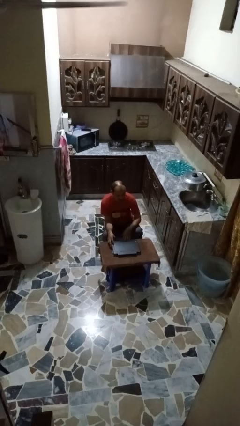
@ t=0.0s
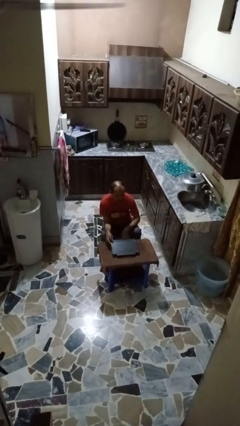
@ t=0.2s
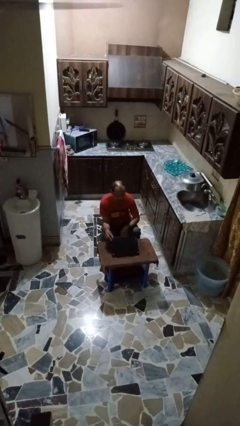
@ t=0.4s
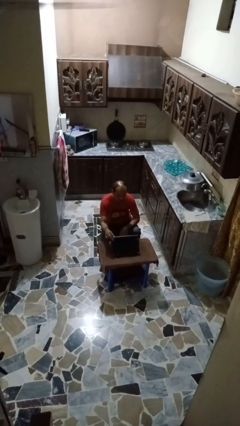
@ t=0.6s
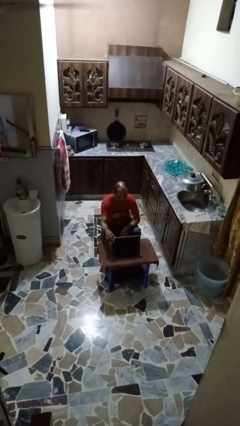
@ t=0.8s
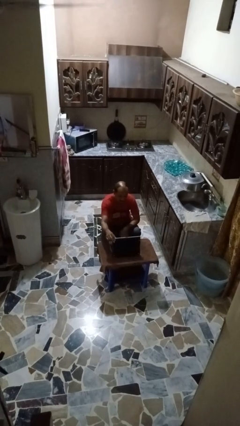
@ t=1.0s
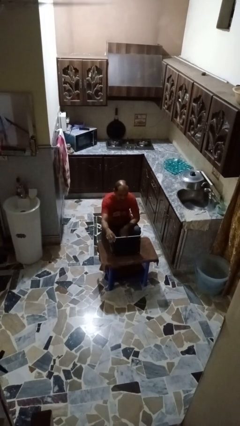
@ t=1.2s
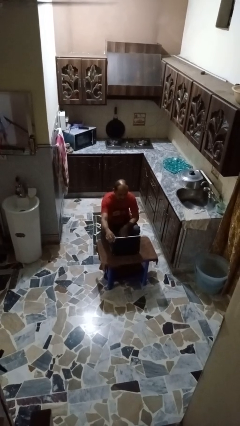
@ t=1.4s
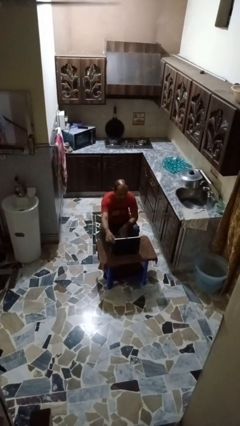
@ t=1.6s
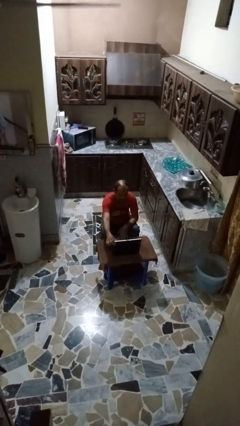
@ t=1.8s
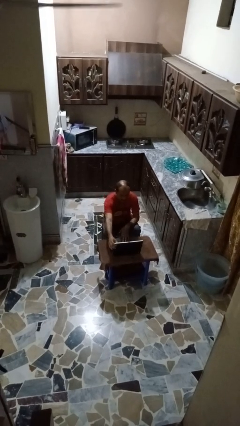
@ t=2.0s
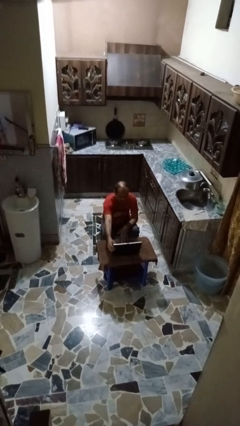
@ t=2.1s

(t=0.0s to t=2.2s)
person opens laptop

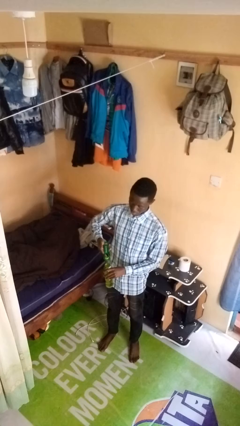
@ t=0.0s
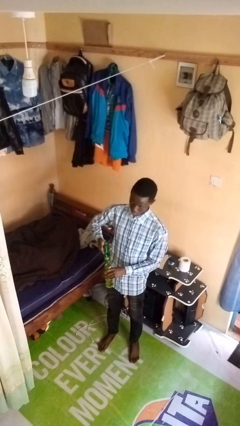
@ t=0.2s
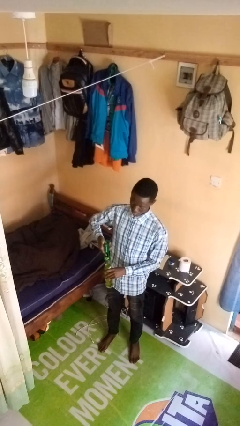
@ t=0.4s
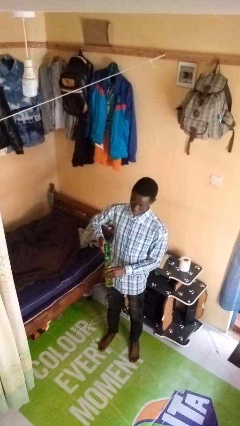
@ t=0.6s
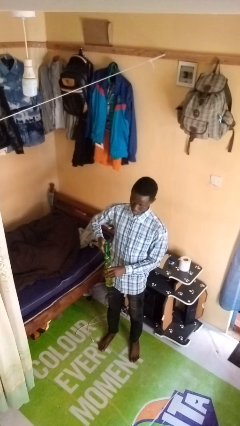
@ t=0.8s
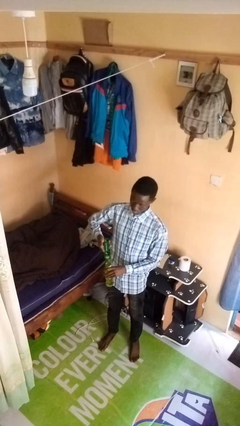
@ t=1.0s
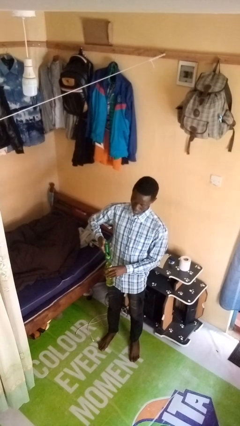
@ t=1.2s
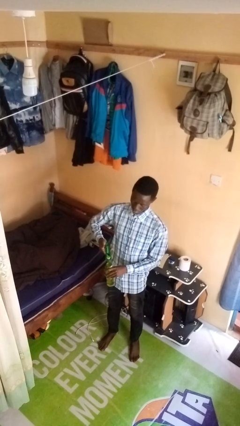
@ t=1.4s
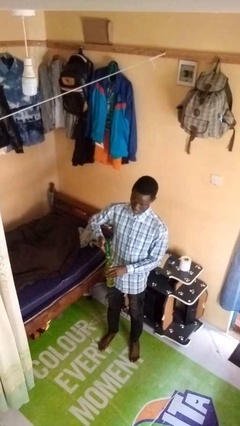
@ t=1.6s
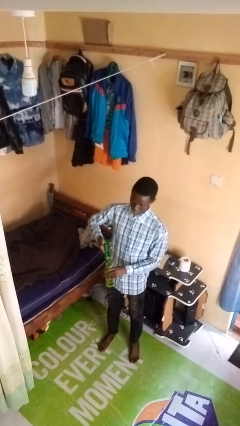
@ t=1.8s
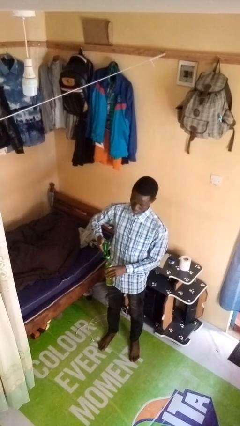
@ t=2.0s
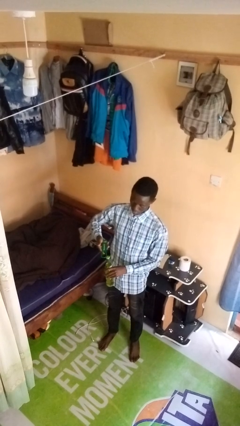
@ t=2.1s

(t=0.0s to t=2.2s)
person opens can with can opener

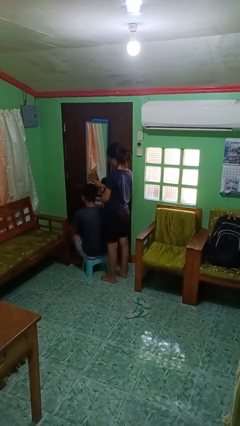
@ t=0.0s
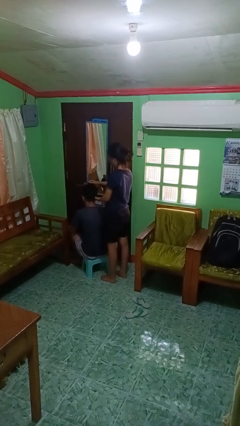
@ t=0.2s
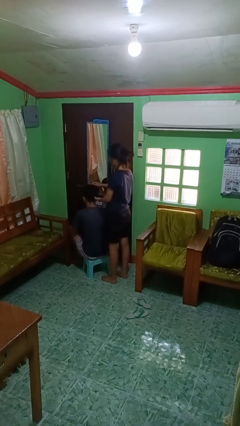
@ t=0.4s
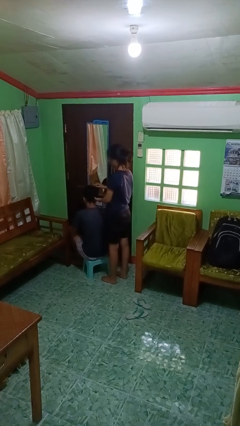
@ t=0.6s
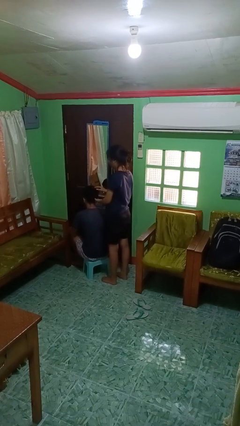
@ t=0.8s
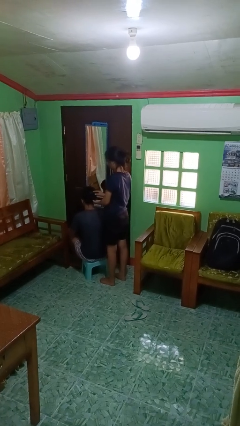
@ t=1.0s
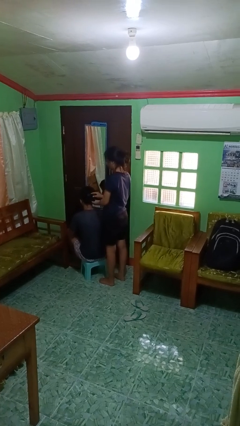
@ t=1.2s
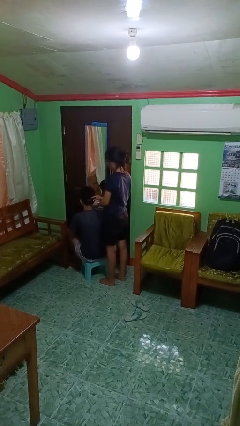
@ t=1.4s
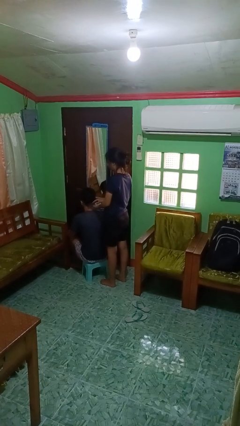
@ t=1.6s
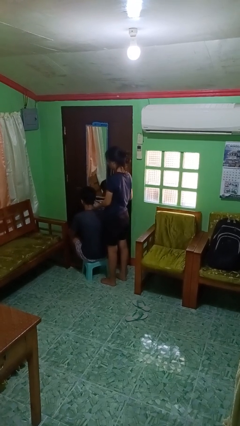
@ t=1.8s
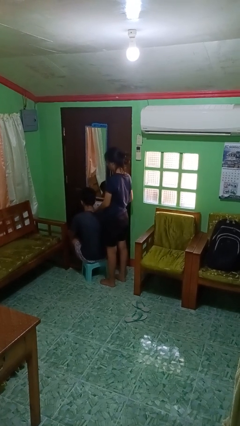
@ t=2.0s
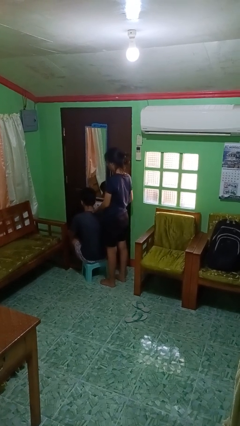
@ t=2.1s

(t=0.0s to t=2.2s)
person brushes hair of person

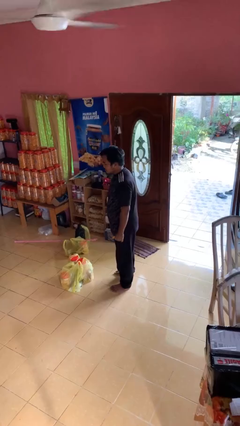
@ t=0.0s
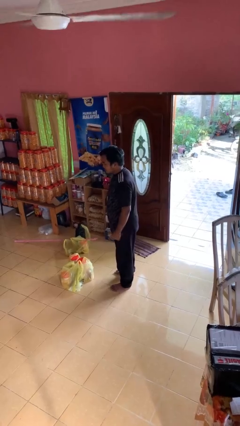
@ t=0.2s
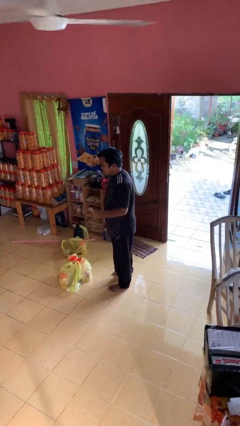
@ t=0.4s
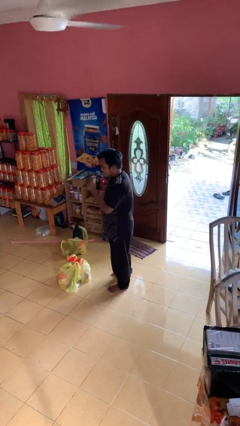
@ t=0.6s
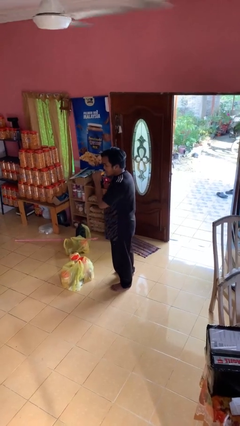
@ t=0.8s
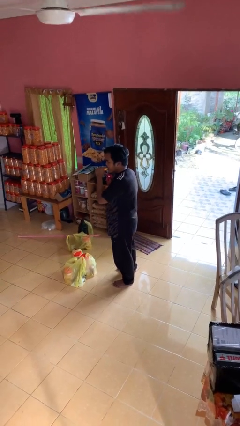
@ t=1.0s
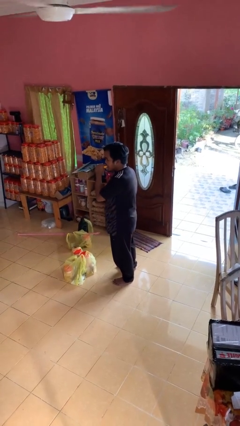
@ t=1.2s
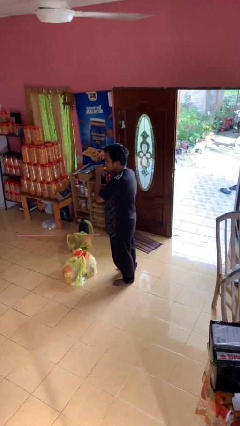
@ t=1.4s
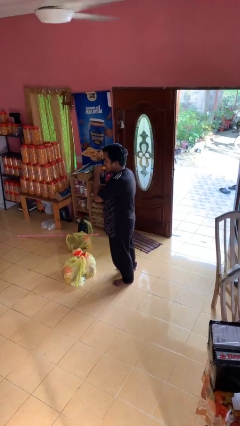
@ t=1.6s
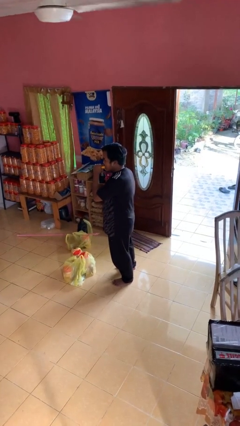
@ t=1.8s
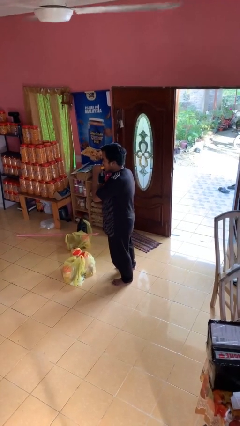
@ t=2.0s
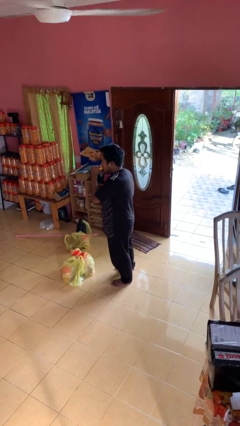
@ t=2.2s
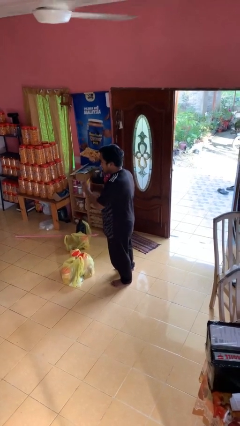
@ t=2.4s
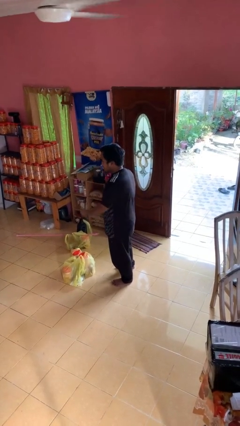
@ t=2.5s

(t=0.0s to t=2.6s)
person eats banana

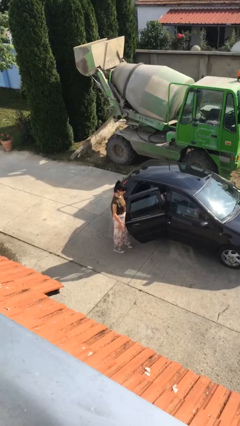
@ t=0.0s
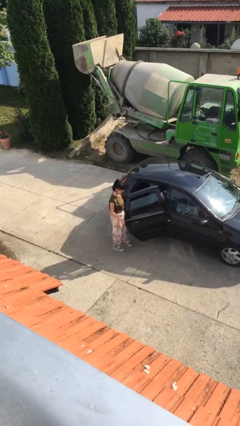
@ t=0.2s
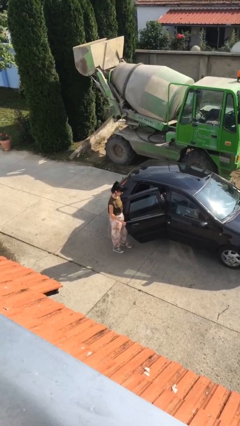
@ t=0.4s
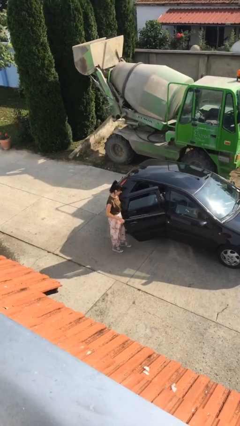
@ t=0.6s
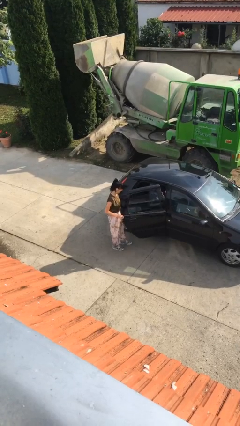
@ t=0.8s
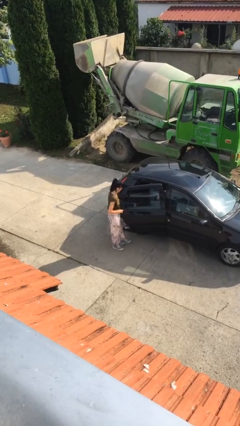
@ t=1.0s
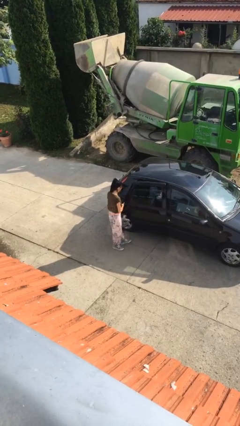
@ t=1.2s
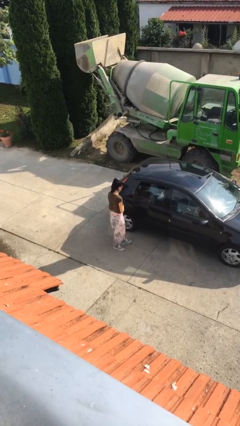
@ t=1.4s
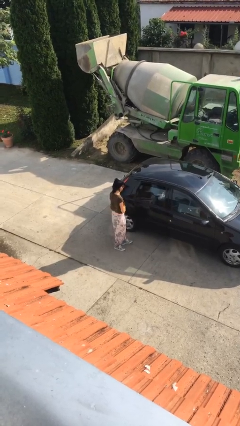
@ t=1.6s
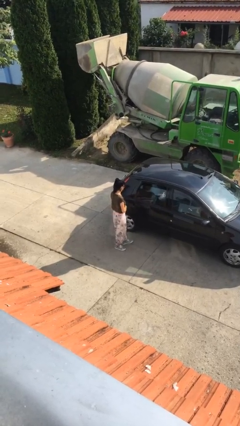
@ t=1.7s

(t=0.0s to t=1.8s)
person closes car door

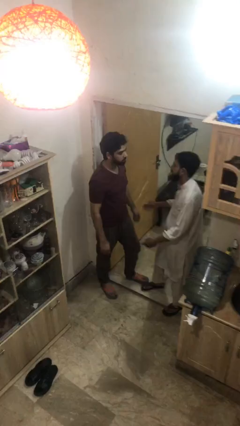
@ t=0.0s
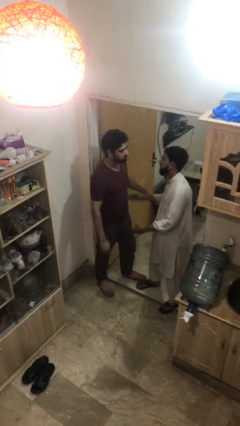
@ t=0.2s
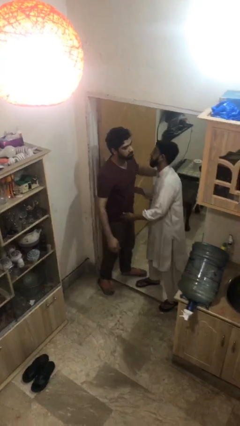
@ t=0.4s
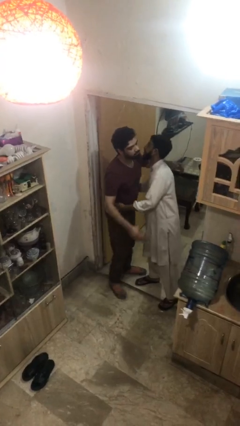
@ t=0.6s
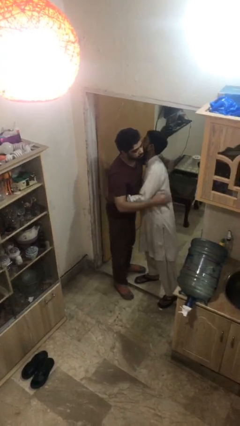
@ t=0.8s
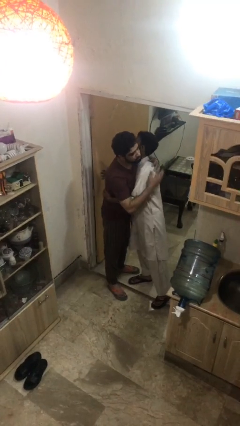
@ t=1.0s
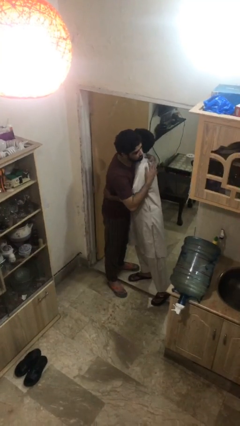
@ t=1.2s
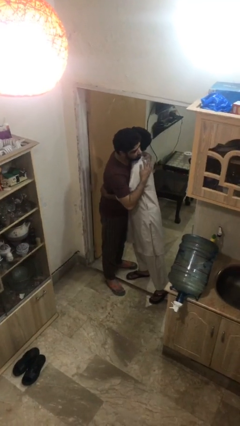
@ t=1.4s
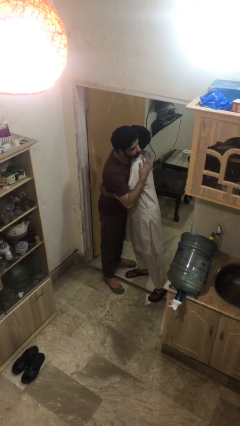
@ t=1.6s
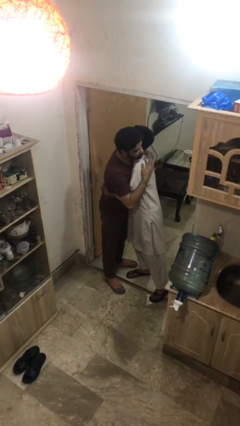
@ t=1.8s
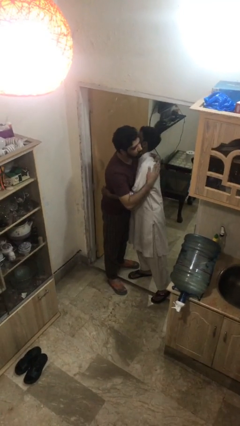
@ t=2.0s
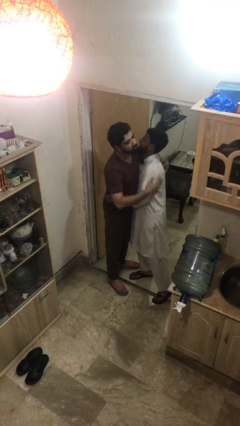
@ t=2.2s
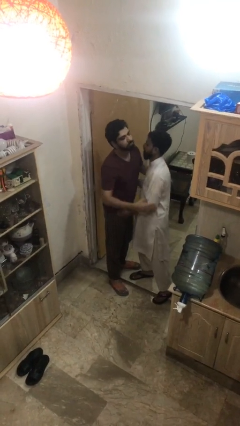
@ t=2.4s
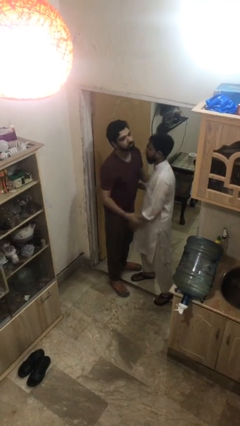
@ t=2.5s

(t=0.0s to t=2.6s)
person embraces person

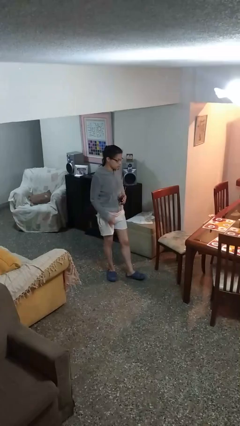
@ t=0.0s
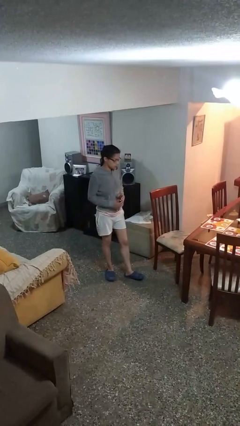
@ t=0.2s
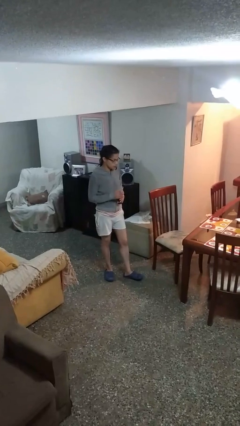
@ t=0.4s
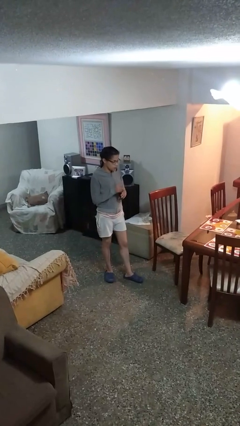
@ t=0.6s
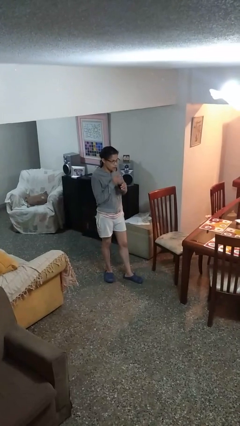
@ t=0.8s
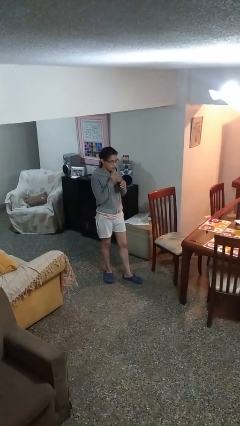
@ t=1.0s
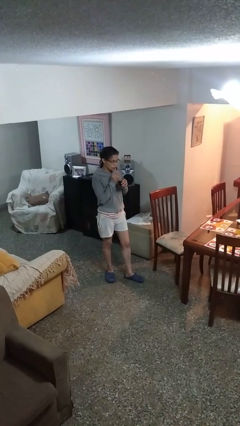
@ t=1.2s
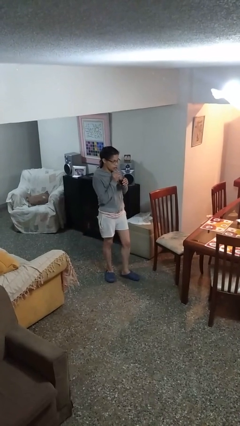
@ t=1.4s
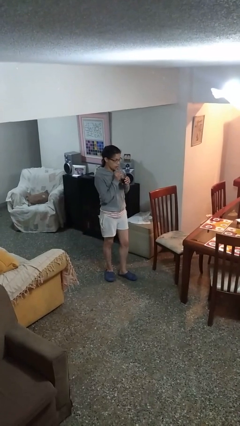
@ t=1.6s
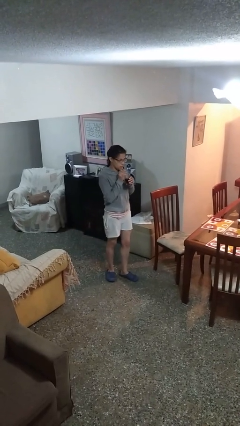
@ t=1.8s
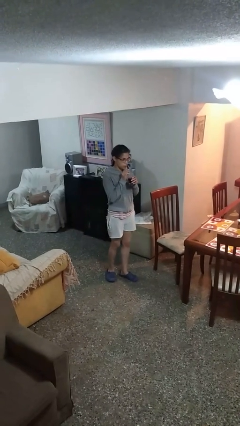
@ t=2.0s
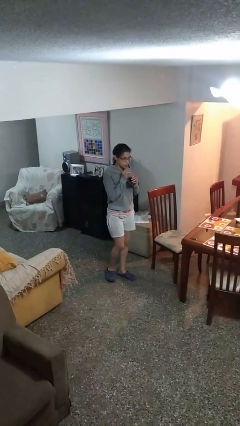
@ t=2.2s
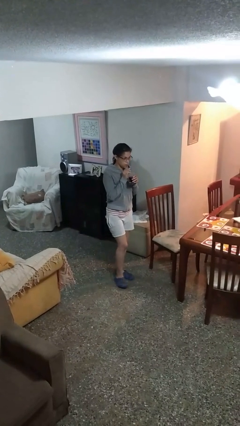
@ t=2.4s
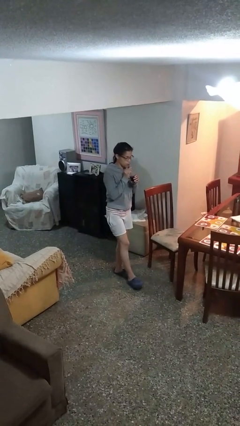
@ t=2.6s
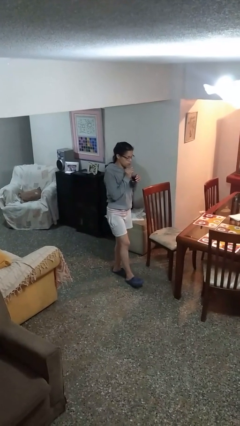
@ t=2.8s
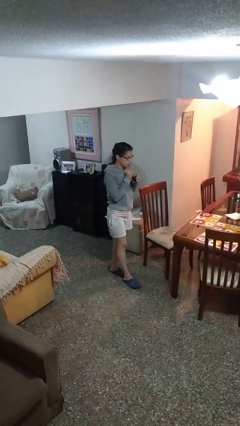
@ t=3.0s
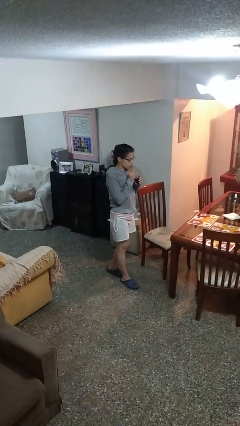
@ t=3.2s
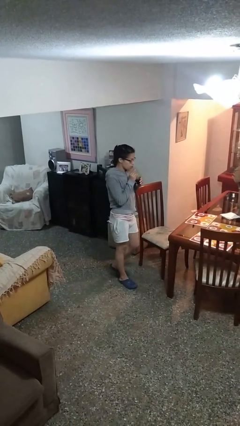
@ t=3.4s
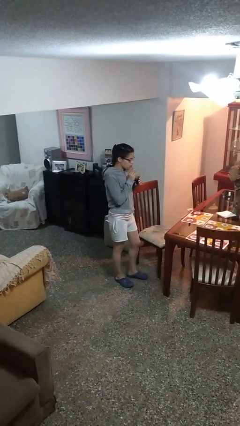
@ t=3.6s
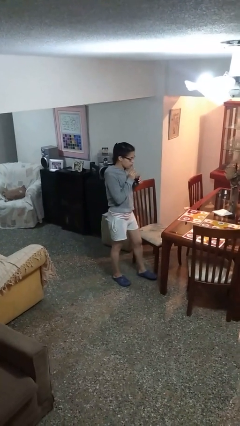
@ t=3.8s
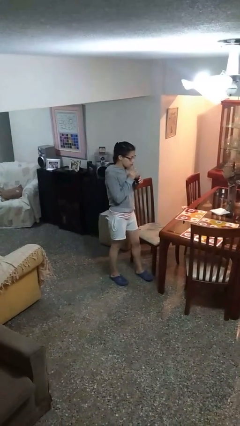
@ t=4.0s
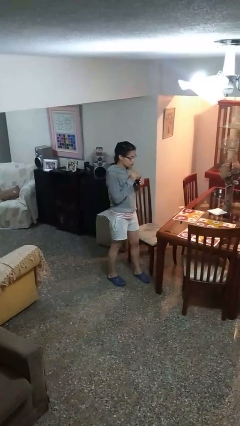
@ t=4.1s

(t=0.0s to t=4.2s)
person drinks from straw
